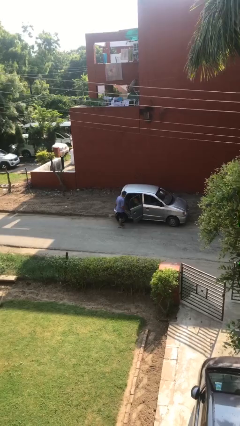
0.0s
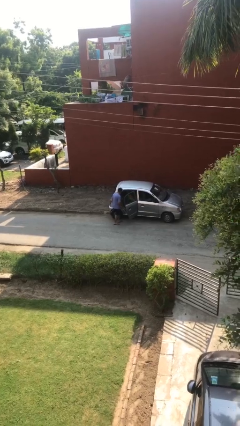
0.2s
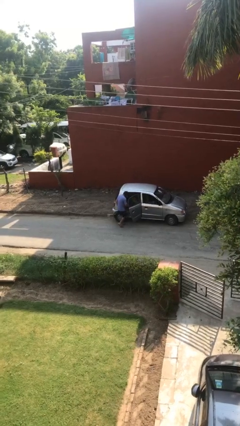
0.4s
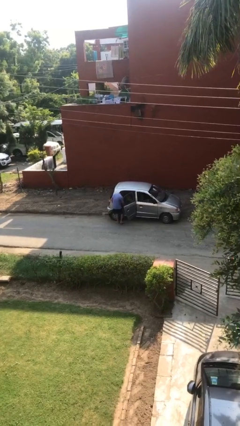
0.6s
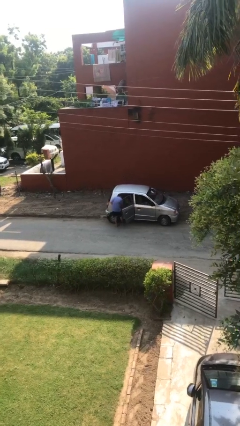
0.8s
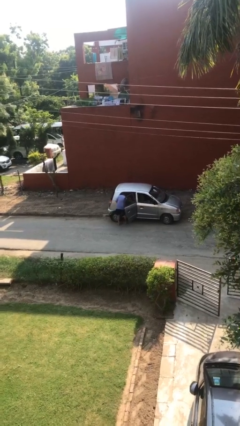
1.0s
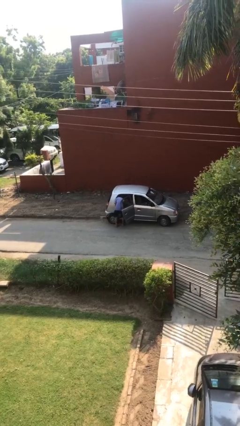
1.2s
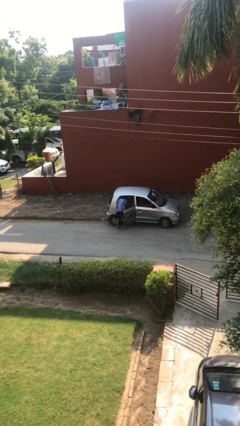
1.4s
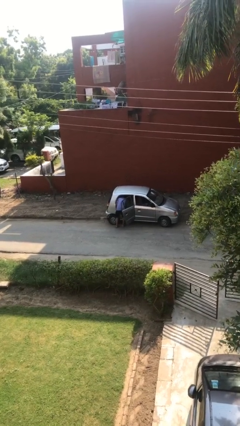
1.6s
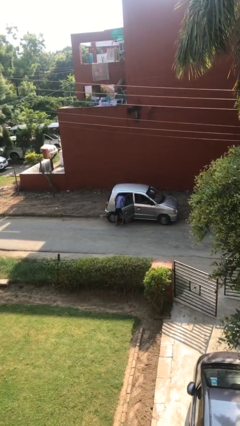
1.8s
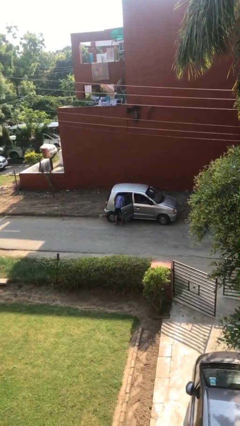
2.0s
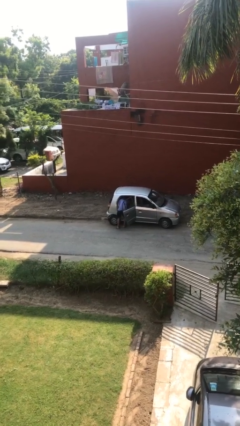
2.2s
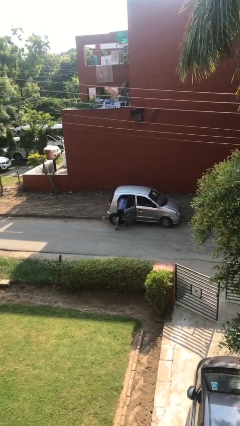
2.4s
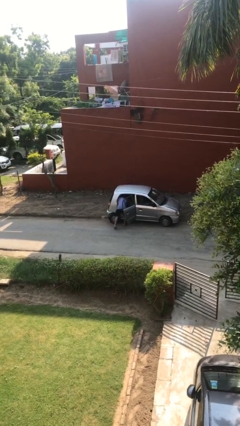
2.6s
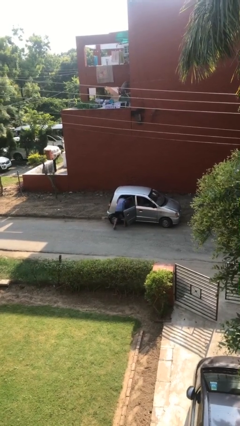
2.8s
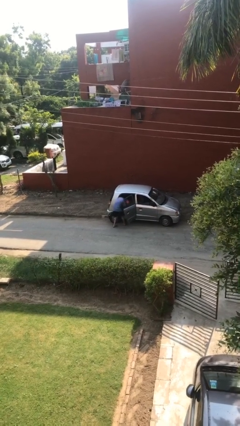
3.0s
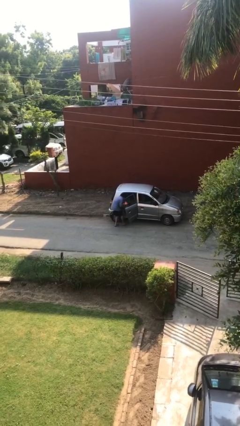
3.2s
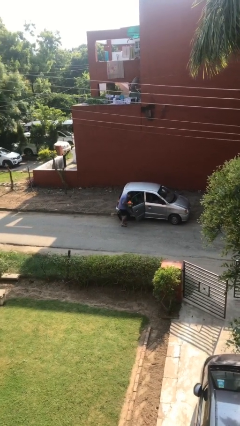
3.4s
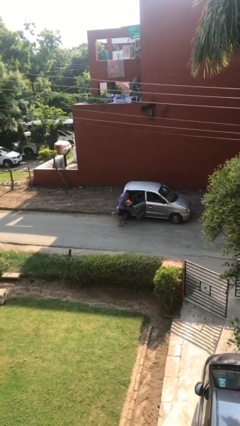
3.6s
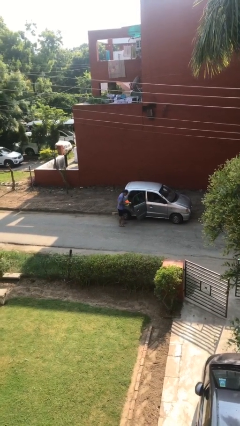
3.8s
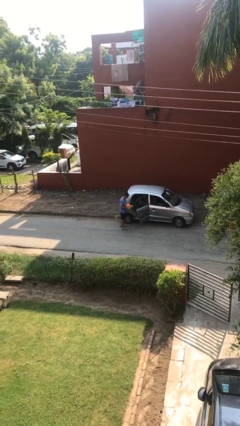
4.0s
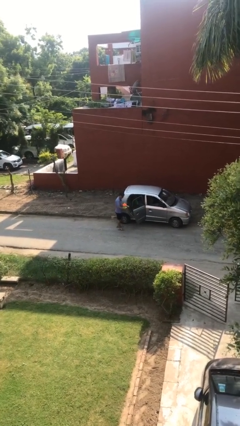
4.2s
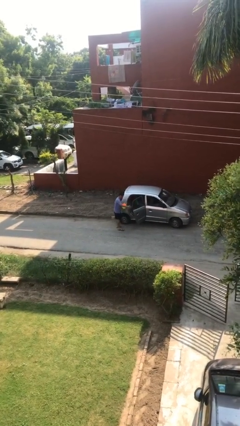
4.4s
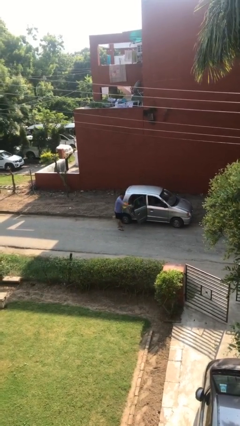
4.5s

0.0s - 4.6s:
person unloads car

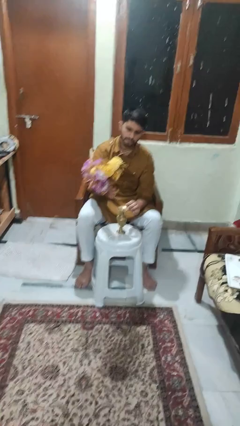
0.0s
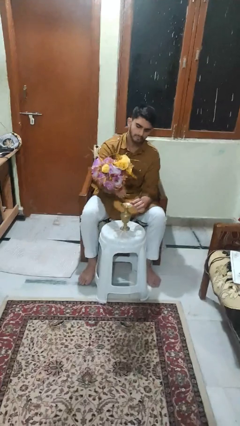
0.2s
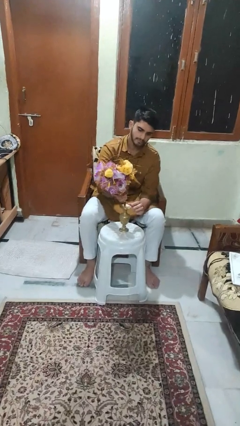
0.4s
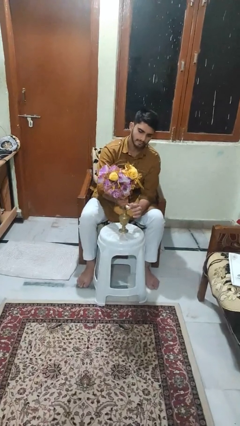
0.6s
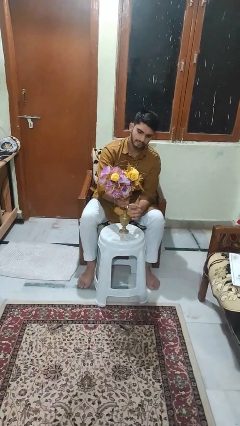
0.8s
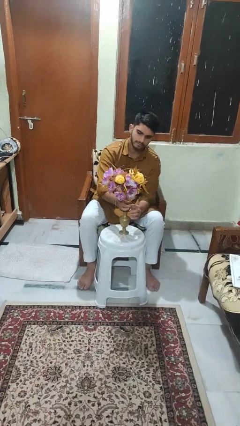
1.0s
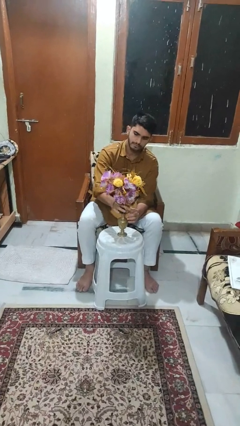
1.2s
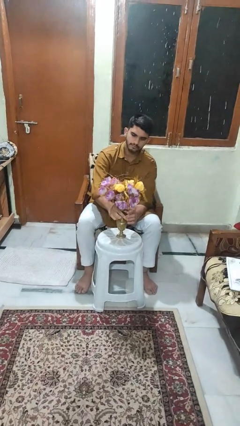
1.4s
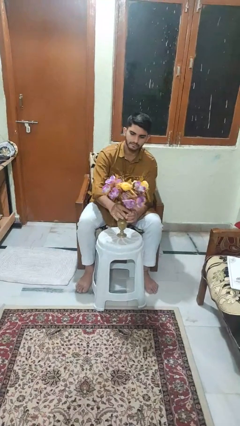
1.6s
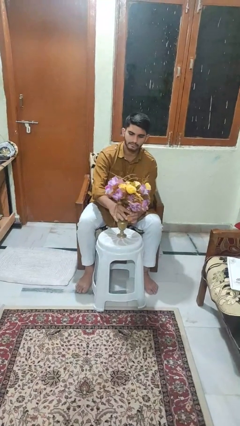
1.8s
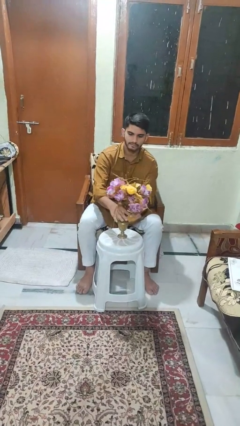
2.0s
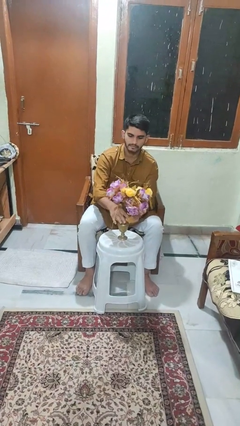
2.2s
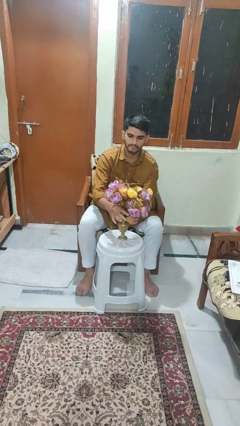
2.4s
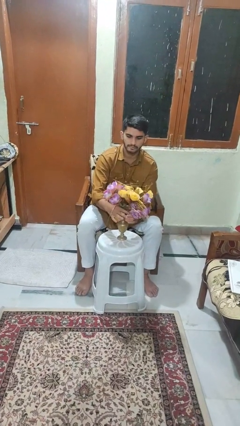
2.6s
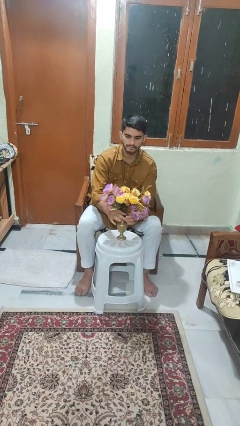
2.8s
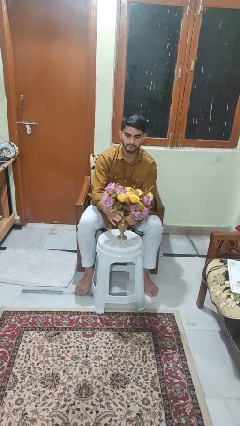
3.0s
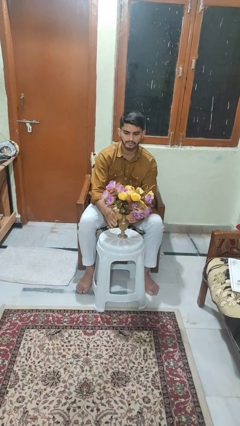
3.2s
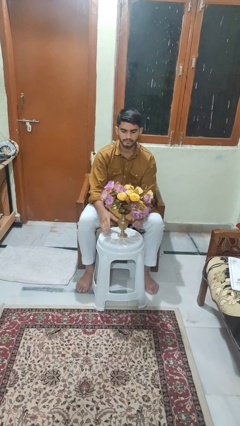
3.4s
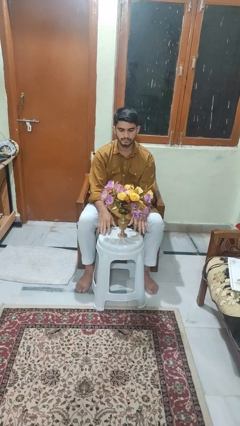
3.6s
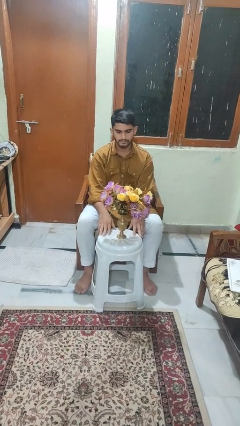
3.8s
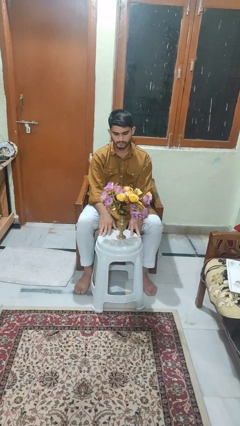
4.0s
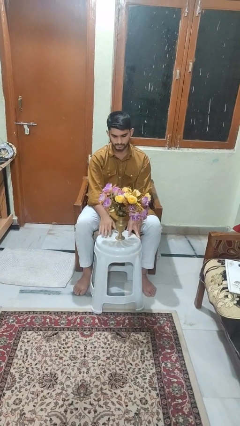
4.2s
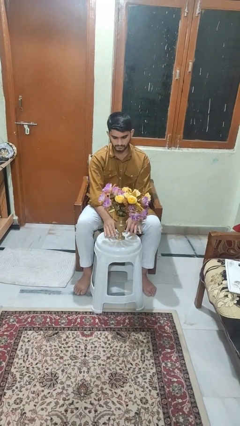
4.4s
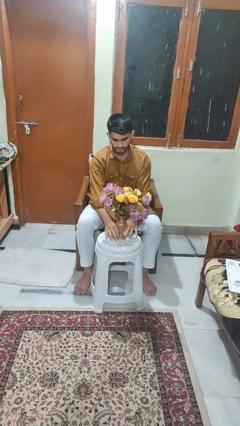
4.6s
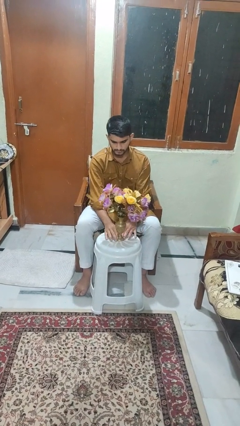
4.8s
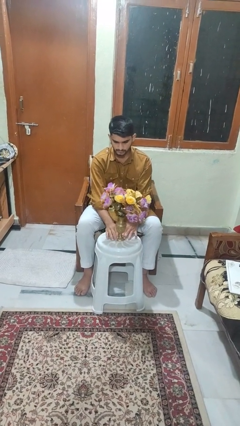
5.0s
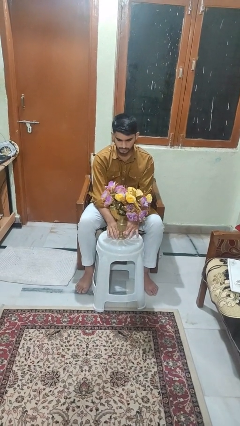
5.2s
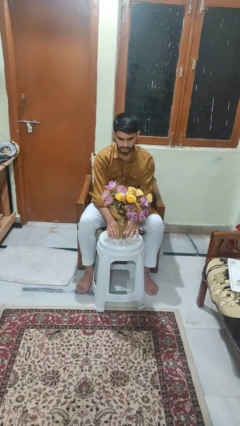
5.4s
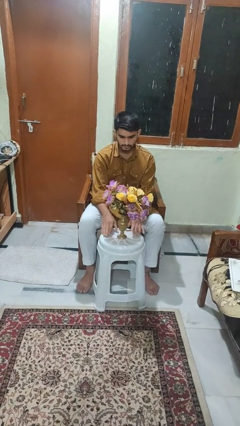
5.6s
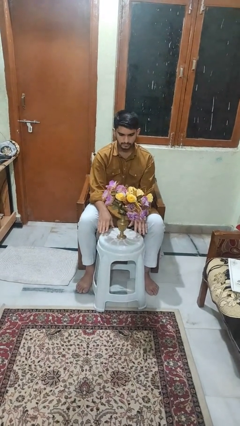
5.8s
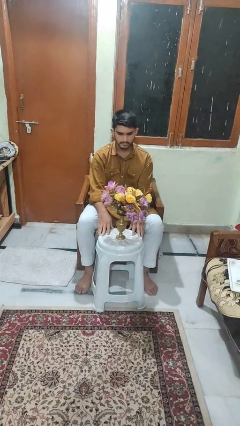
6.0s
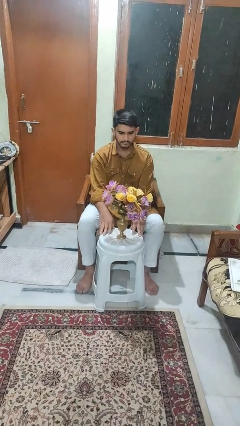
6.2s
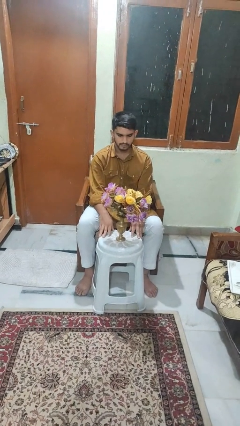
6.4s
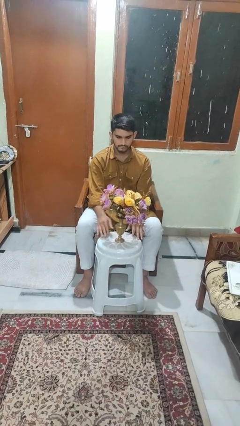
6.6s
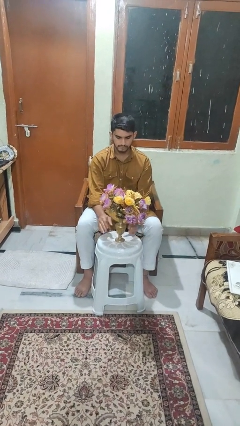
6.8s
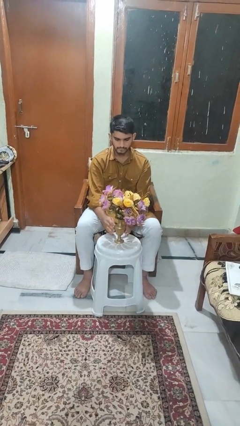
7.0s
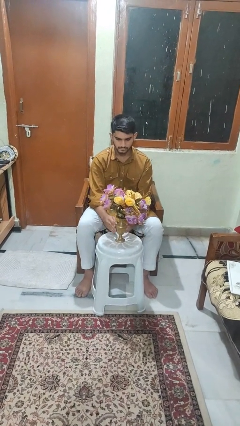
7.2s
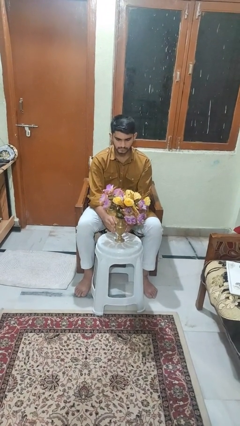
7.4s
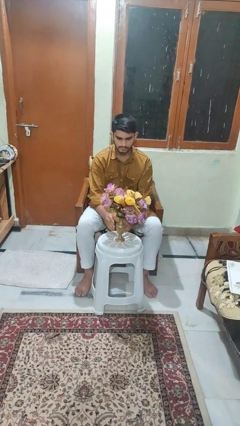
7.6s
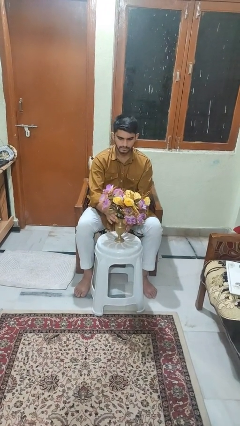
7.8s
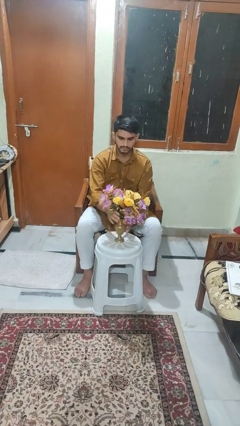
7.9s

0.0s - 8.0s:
person arranges flowers in vase

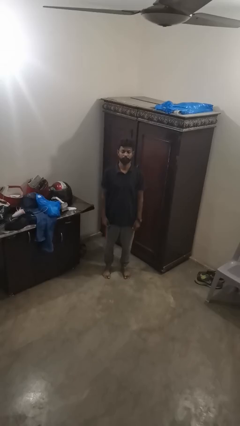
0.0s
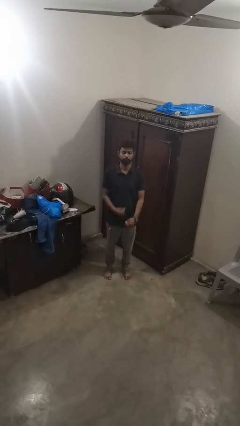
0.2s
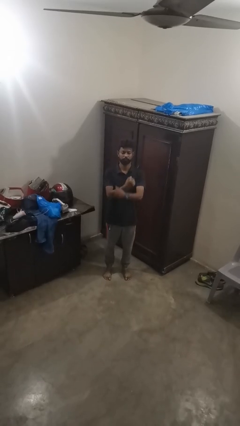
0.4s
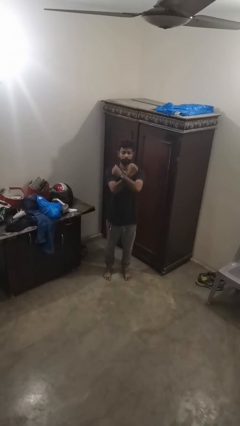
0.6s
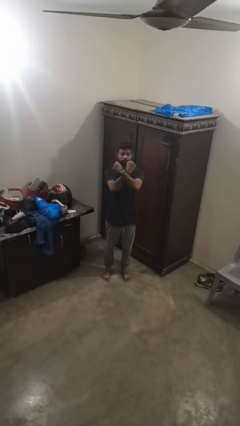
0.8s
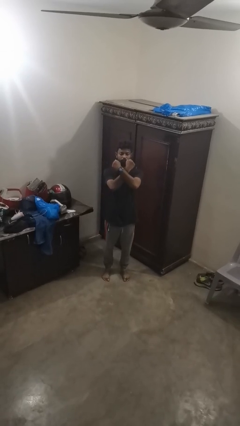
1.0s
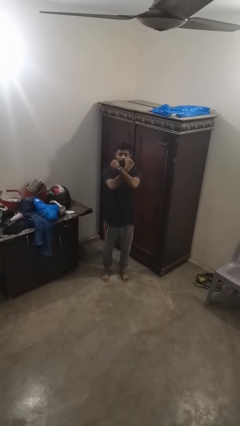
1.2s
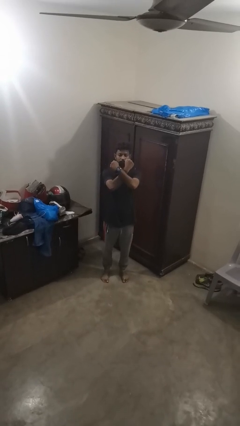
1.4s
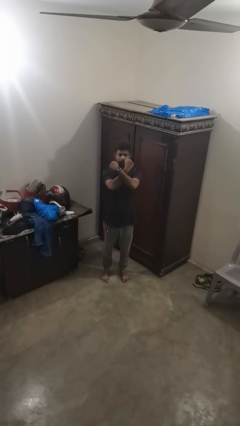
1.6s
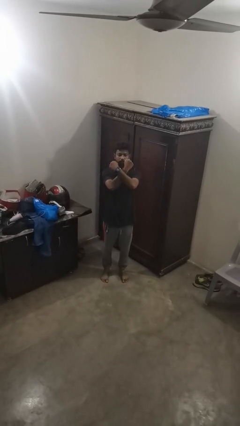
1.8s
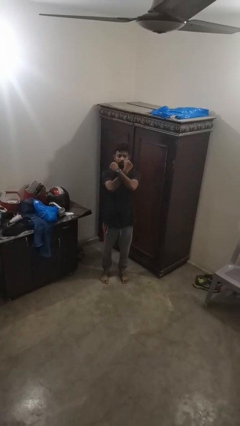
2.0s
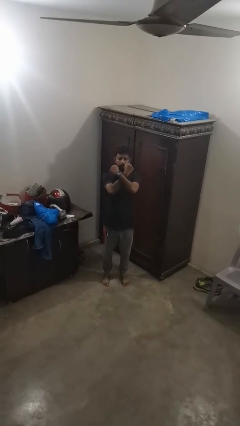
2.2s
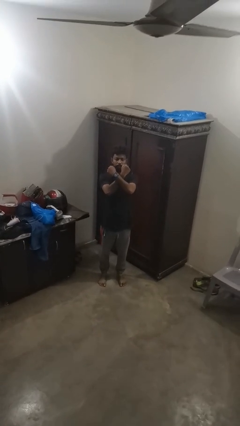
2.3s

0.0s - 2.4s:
person gestures arms x

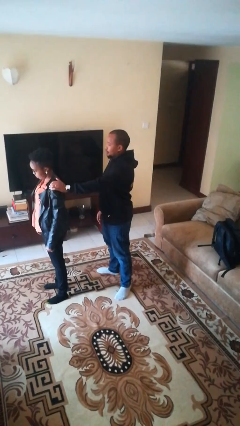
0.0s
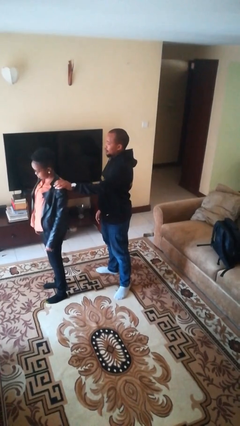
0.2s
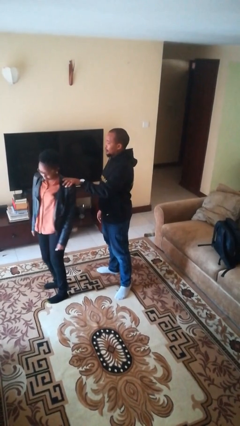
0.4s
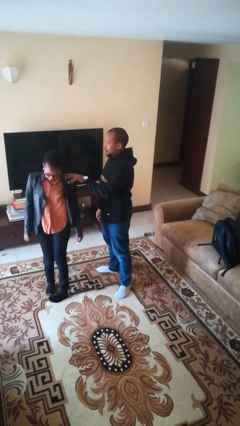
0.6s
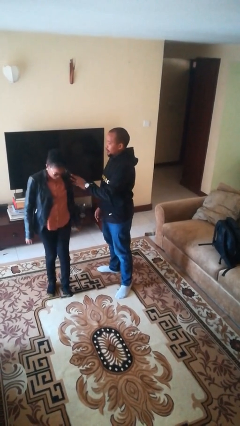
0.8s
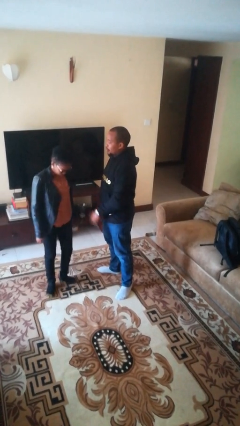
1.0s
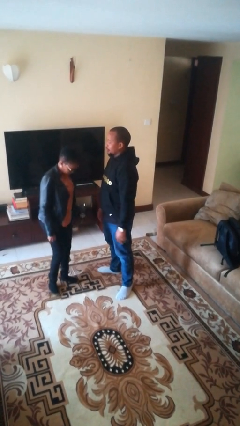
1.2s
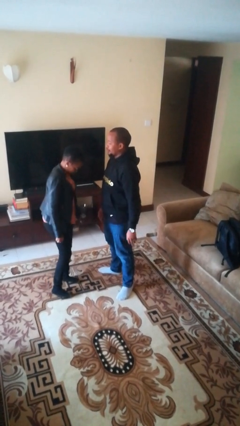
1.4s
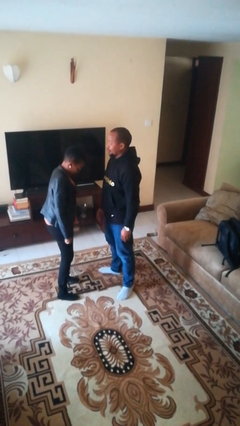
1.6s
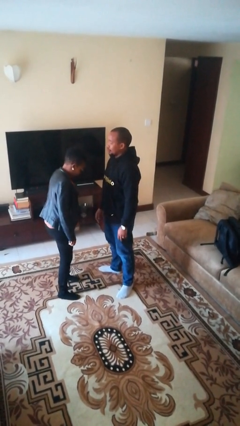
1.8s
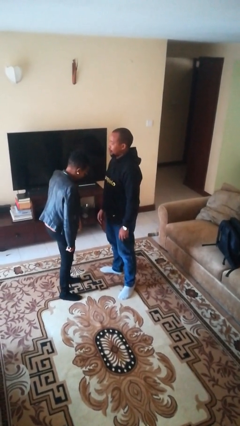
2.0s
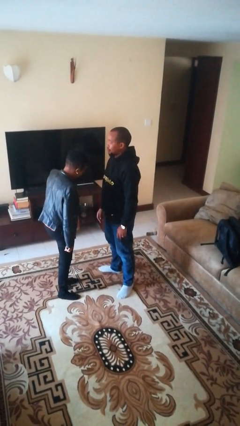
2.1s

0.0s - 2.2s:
person spins person around

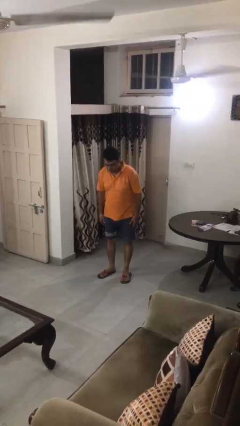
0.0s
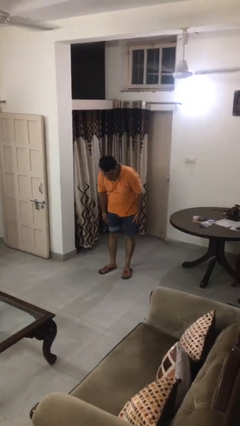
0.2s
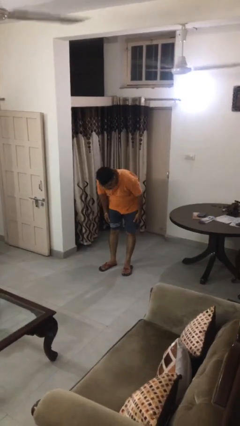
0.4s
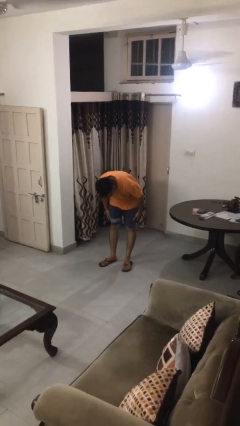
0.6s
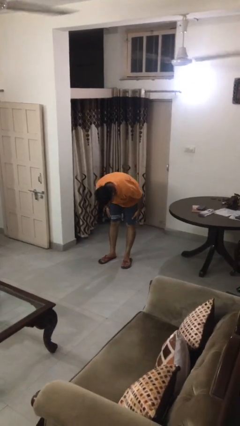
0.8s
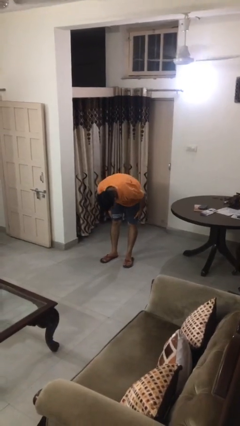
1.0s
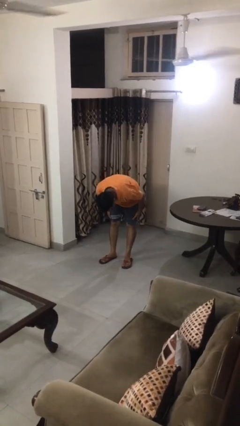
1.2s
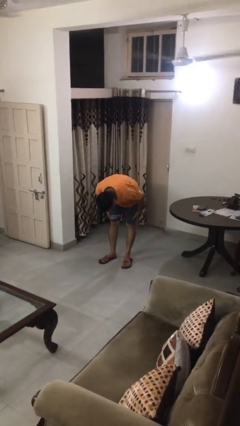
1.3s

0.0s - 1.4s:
person bows
